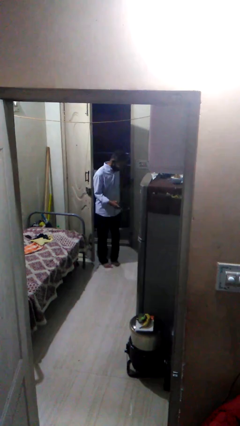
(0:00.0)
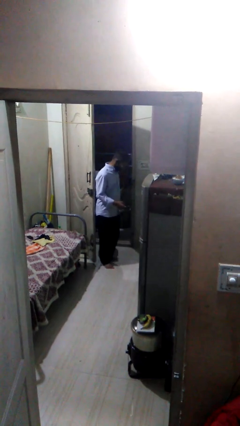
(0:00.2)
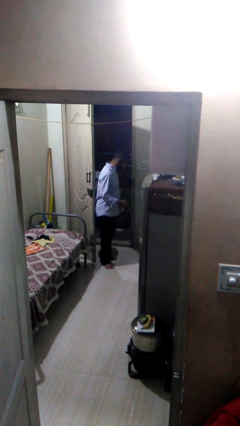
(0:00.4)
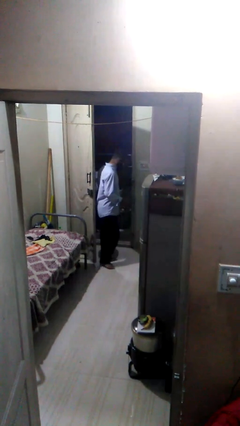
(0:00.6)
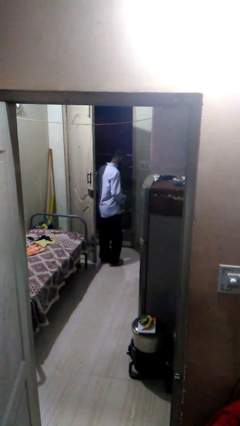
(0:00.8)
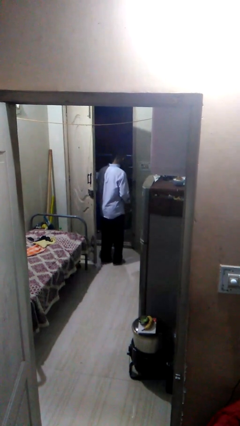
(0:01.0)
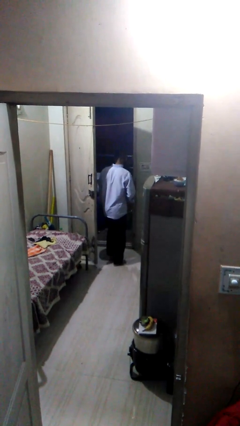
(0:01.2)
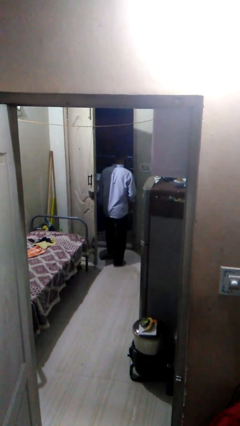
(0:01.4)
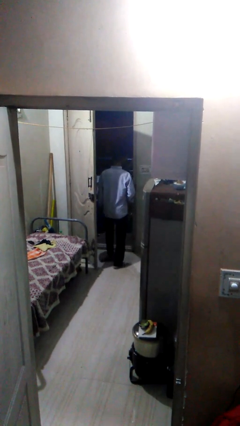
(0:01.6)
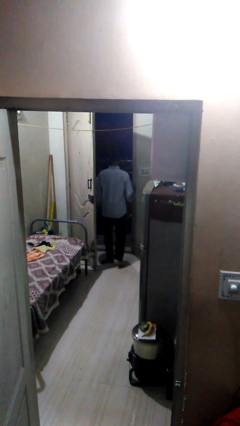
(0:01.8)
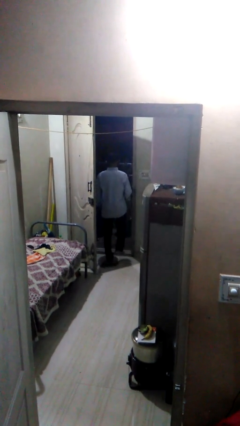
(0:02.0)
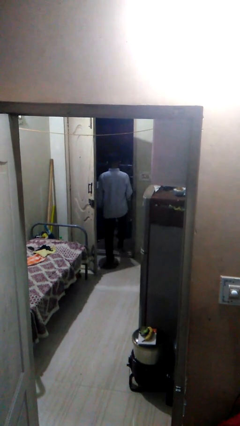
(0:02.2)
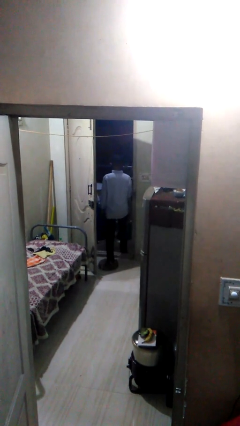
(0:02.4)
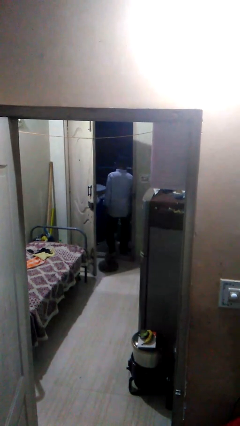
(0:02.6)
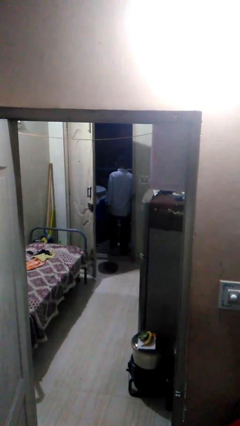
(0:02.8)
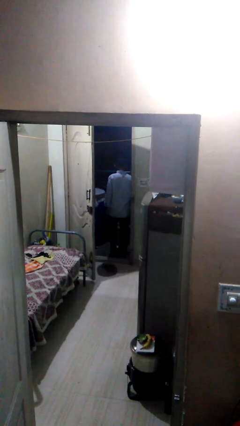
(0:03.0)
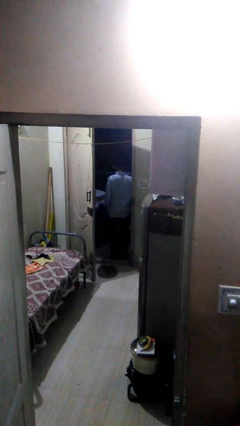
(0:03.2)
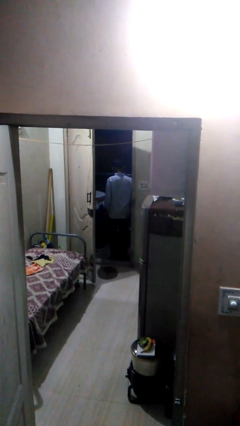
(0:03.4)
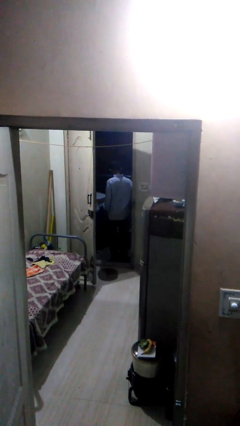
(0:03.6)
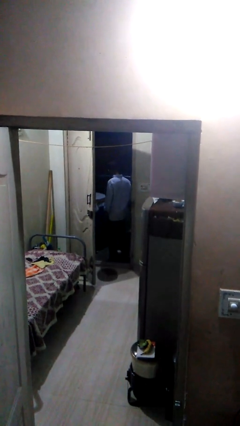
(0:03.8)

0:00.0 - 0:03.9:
person exits scene through structure

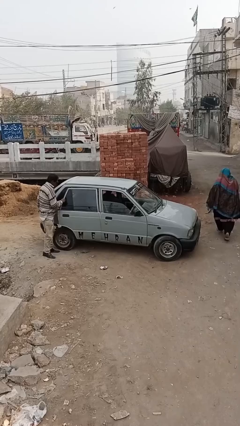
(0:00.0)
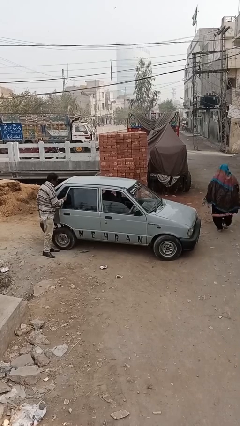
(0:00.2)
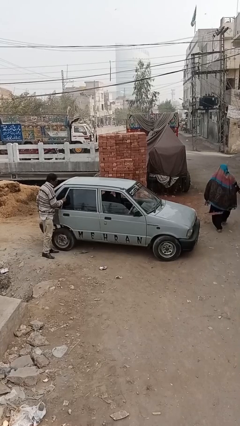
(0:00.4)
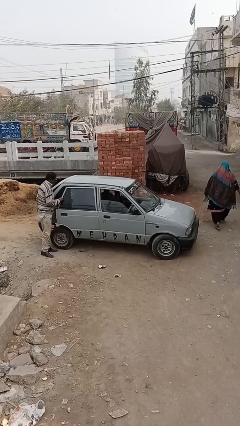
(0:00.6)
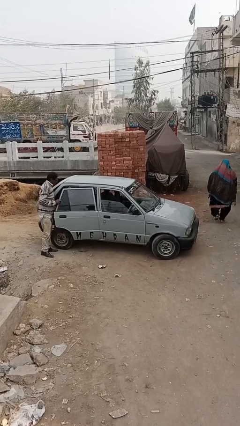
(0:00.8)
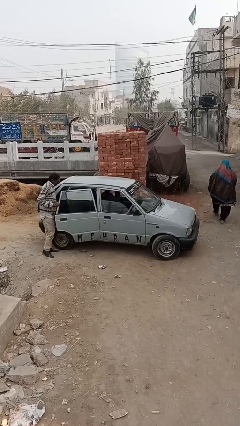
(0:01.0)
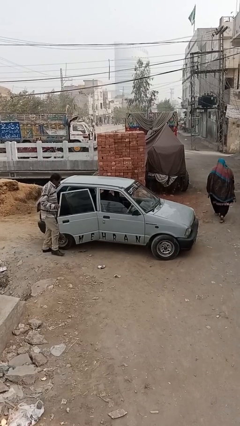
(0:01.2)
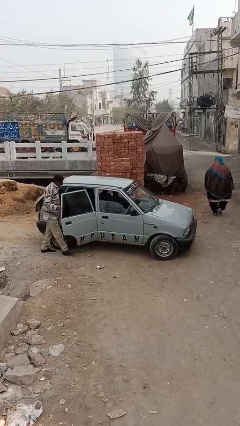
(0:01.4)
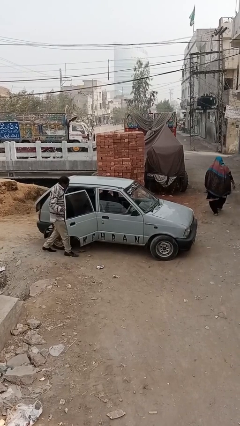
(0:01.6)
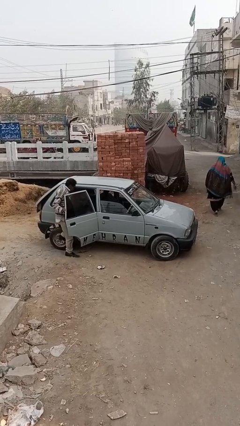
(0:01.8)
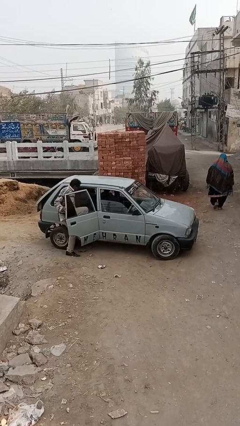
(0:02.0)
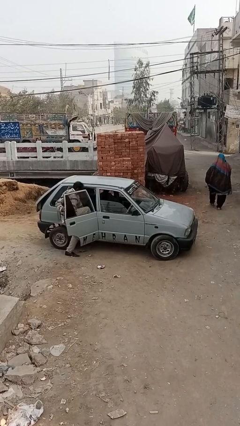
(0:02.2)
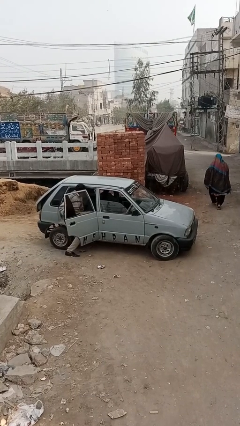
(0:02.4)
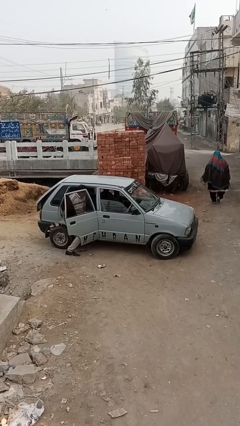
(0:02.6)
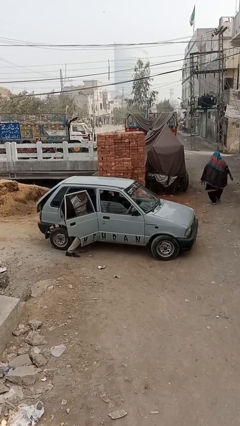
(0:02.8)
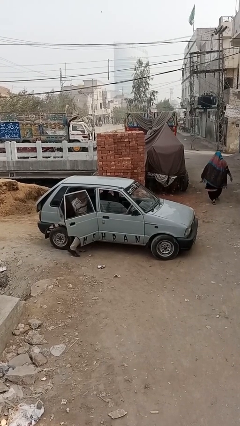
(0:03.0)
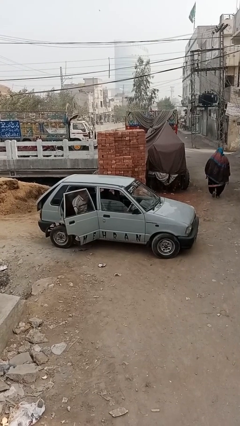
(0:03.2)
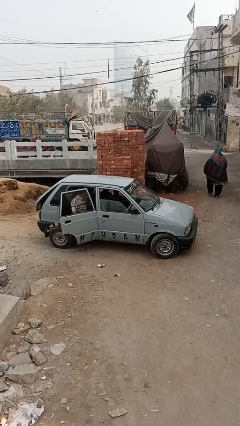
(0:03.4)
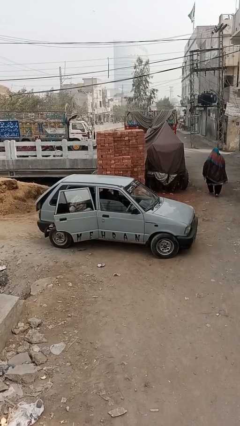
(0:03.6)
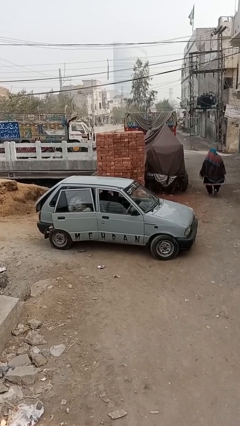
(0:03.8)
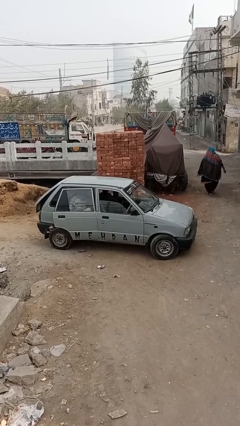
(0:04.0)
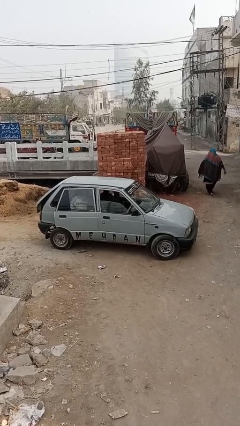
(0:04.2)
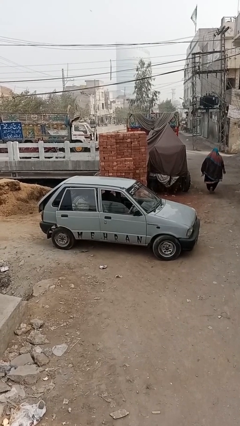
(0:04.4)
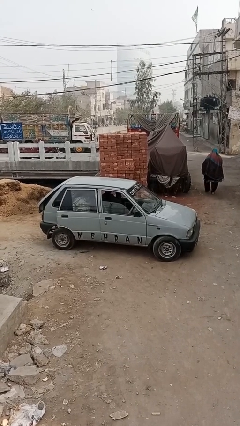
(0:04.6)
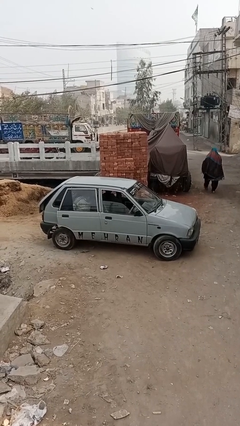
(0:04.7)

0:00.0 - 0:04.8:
car picks up person

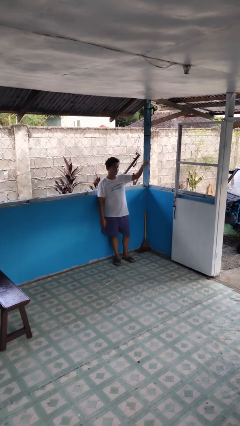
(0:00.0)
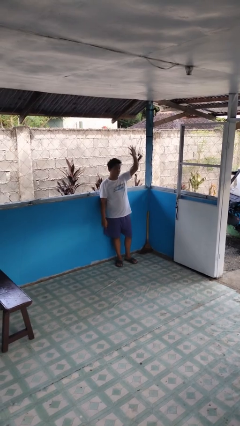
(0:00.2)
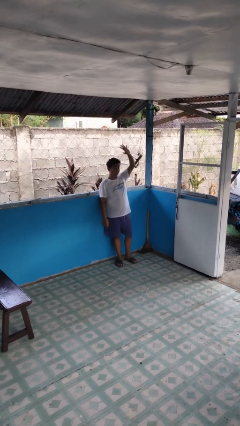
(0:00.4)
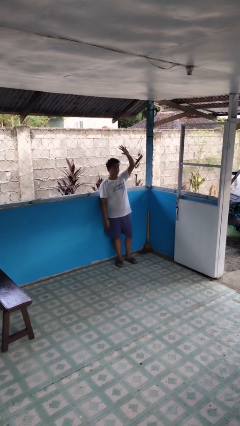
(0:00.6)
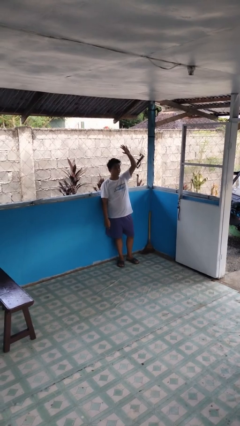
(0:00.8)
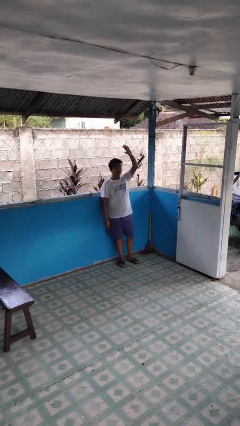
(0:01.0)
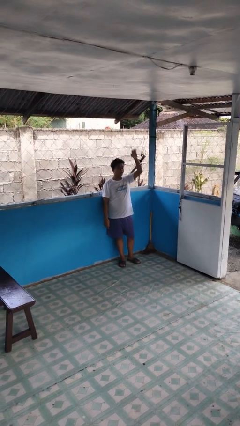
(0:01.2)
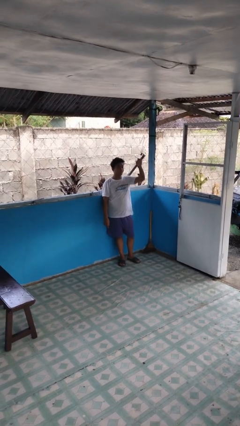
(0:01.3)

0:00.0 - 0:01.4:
person gestures number five

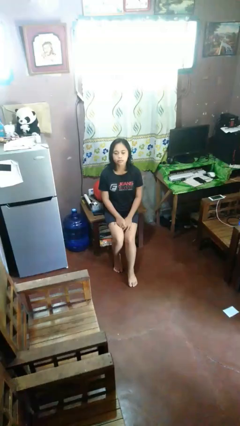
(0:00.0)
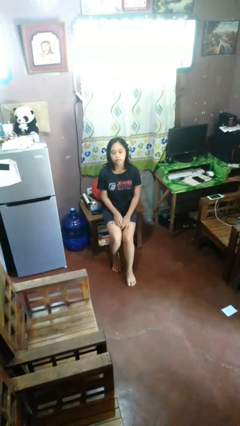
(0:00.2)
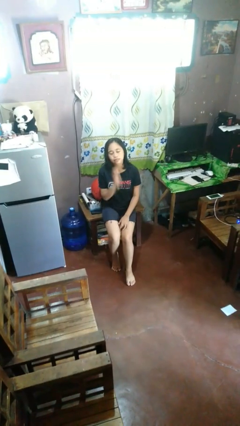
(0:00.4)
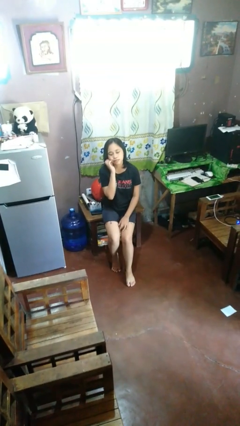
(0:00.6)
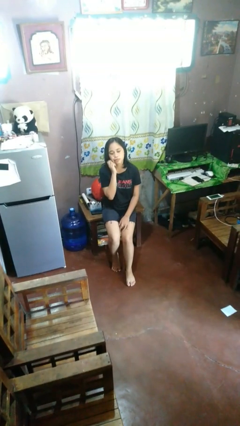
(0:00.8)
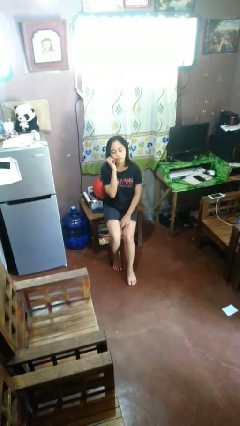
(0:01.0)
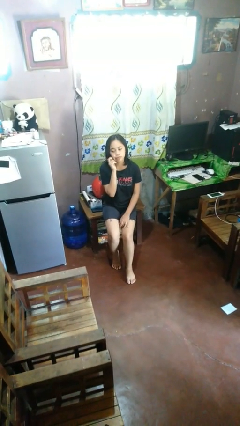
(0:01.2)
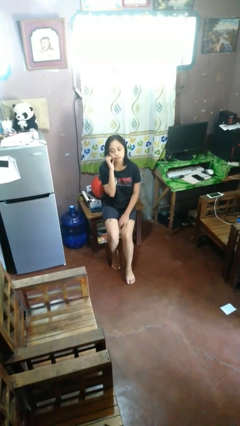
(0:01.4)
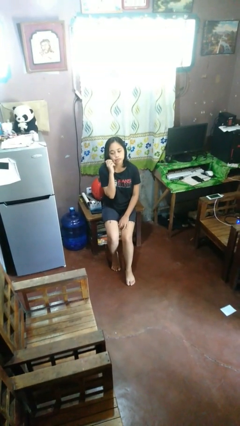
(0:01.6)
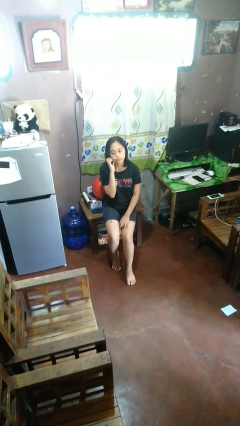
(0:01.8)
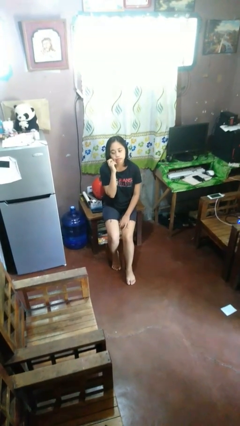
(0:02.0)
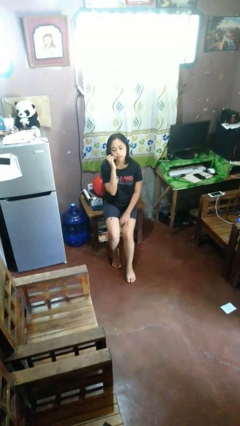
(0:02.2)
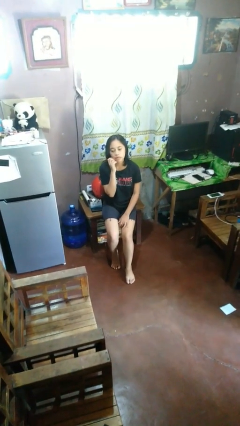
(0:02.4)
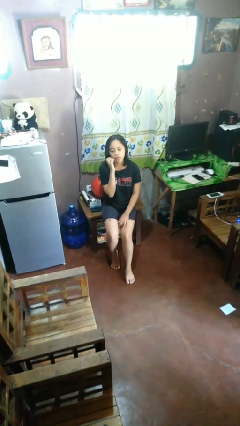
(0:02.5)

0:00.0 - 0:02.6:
person scratches face

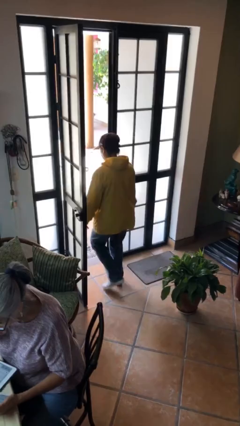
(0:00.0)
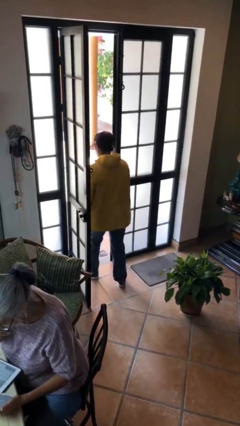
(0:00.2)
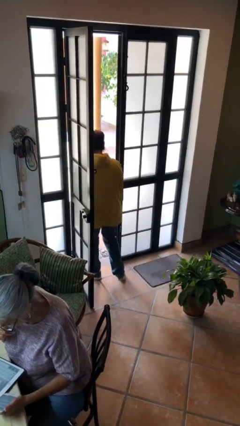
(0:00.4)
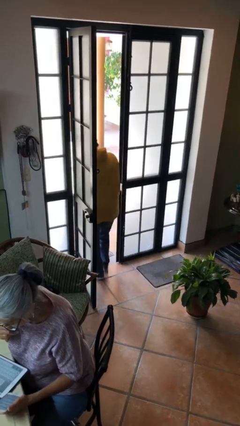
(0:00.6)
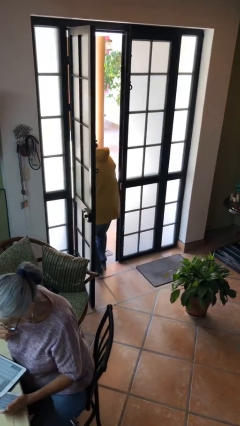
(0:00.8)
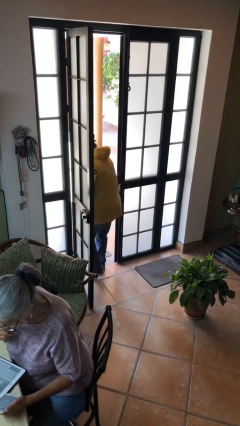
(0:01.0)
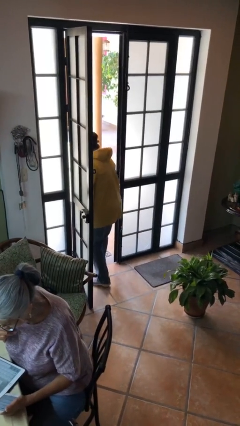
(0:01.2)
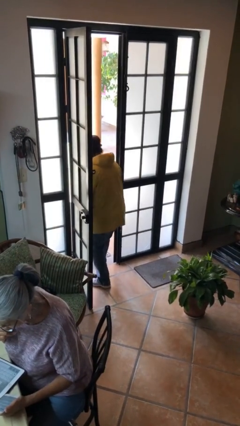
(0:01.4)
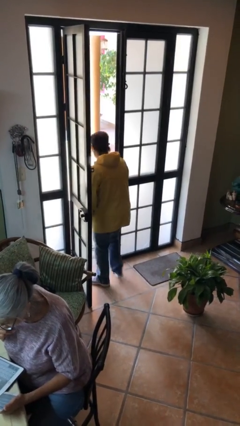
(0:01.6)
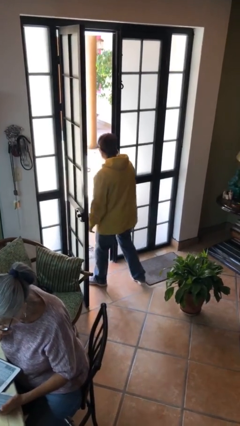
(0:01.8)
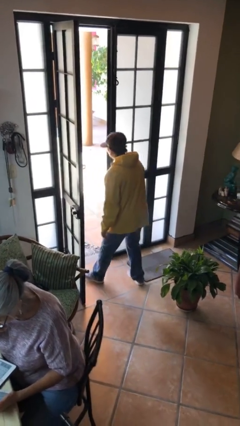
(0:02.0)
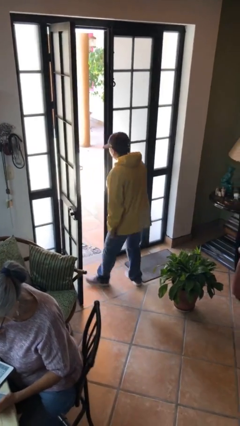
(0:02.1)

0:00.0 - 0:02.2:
person bumps into wall

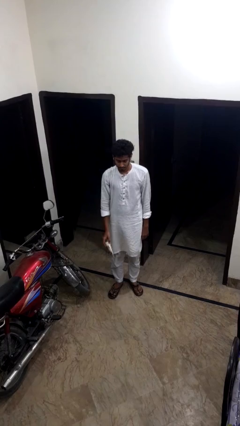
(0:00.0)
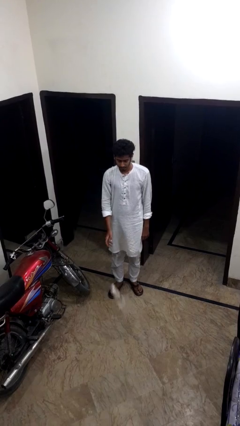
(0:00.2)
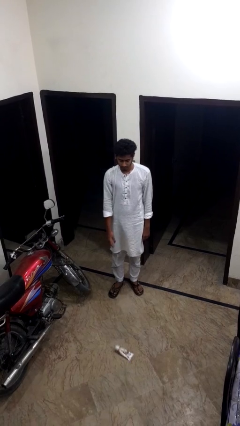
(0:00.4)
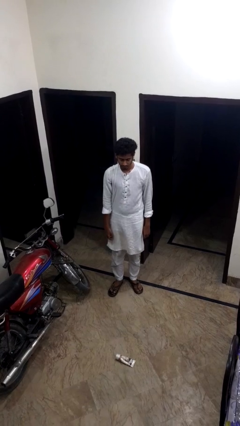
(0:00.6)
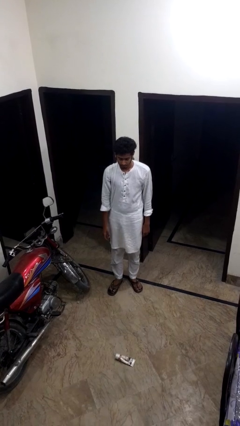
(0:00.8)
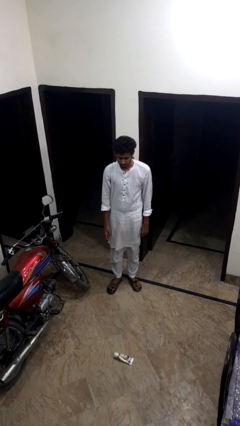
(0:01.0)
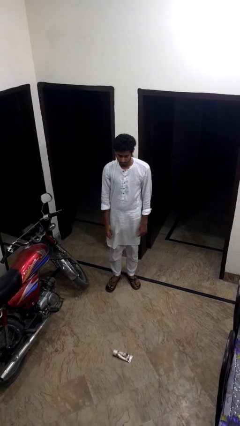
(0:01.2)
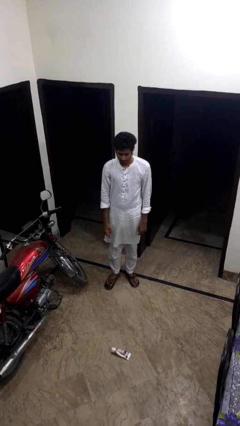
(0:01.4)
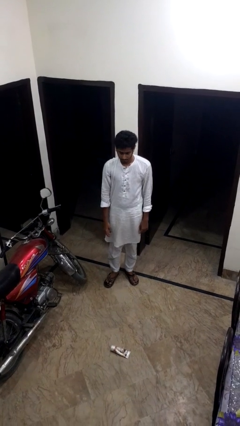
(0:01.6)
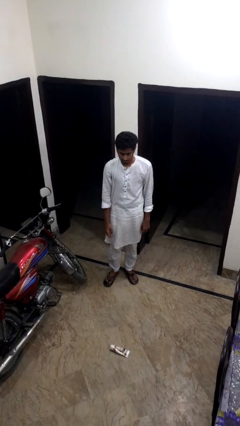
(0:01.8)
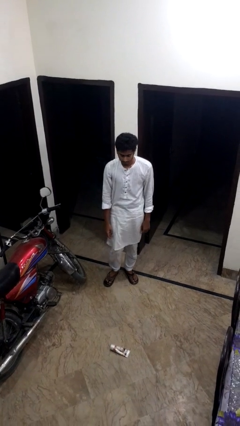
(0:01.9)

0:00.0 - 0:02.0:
person throws object to ground

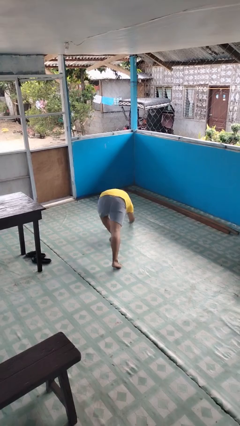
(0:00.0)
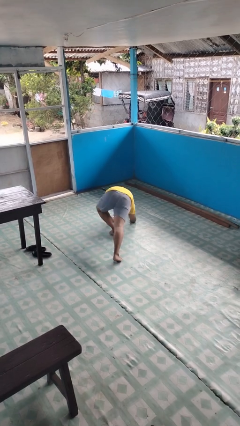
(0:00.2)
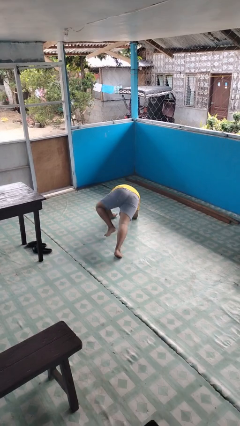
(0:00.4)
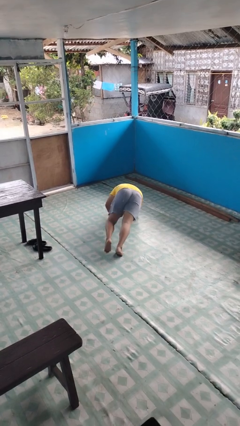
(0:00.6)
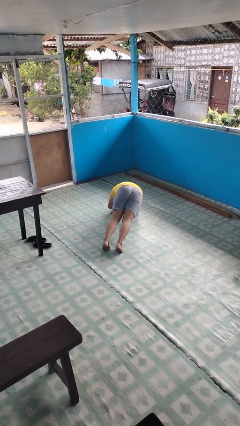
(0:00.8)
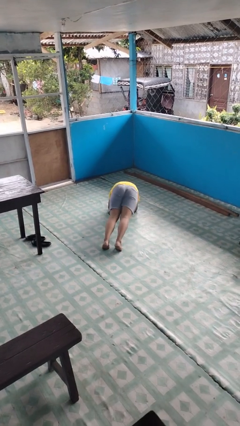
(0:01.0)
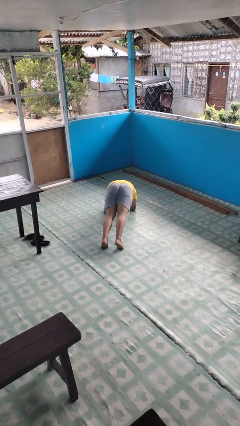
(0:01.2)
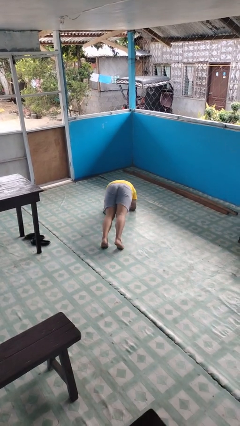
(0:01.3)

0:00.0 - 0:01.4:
person exercises with plank
